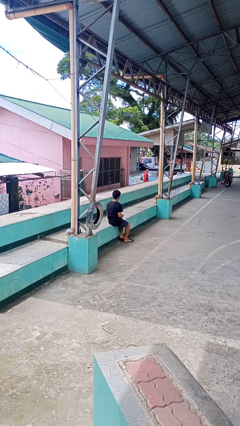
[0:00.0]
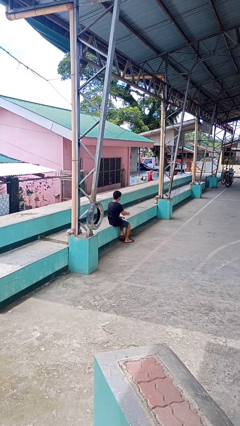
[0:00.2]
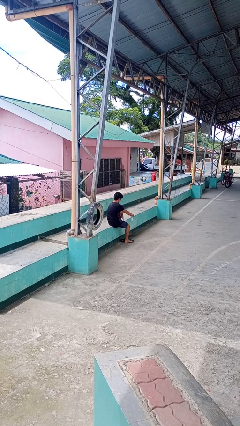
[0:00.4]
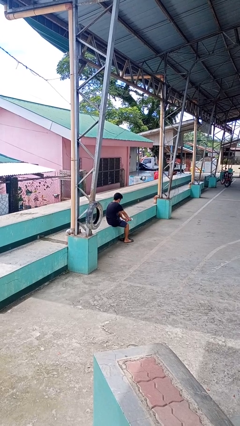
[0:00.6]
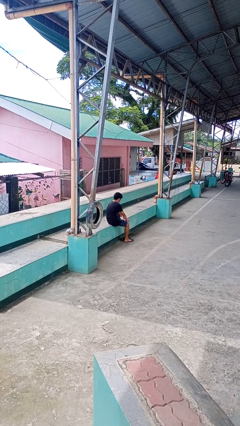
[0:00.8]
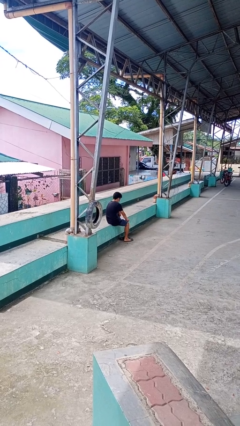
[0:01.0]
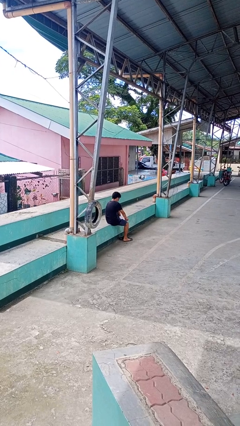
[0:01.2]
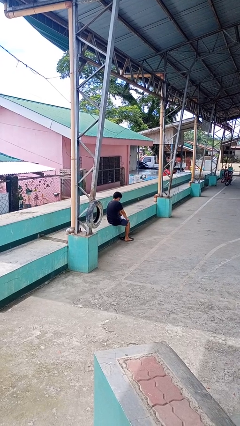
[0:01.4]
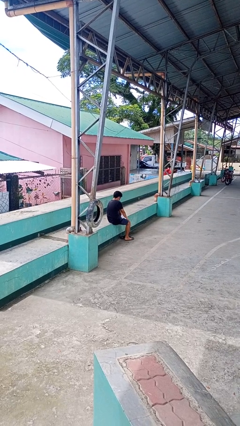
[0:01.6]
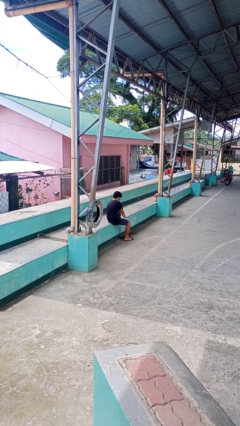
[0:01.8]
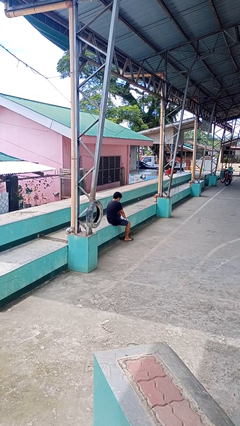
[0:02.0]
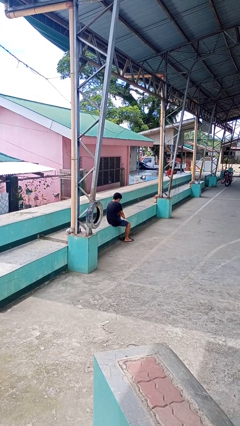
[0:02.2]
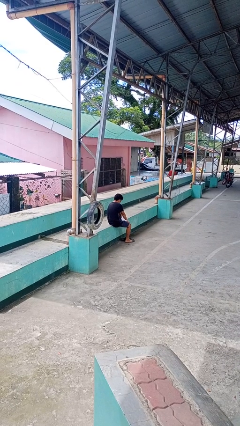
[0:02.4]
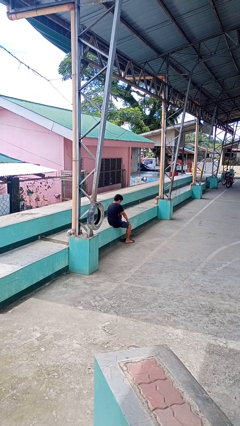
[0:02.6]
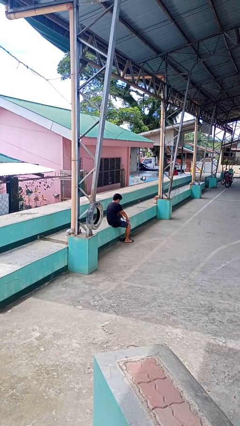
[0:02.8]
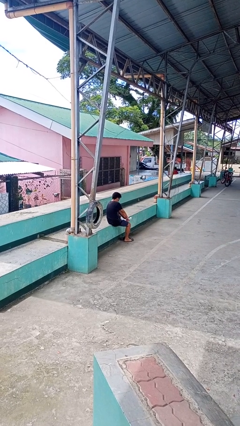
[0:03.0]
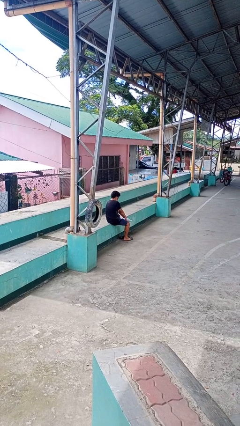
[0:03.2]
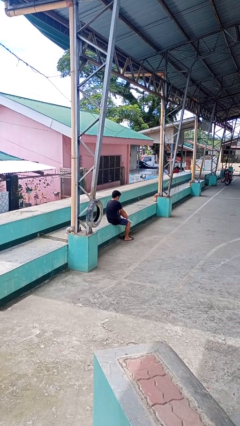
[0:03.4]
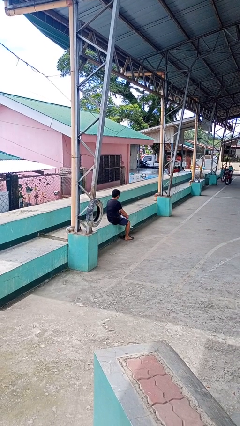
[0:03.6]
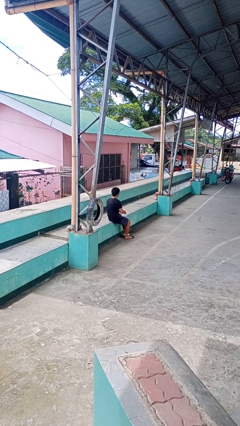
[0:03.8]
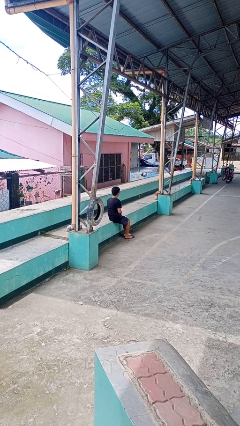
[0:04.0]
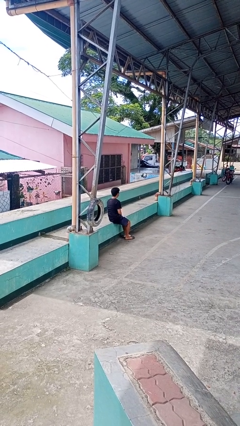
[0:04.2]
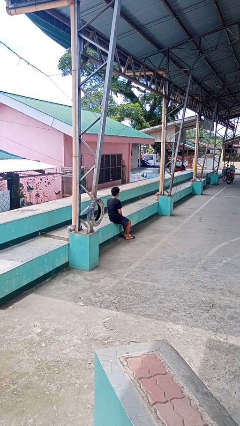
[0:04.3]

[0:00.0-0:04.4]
person puts on socks

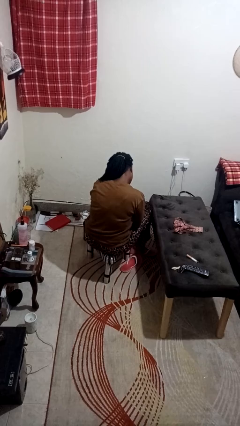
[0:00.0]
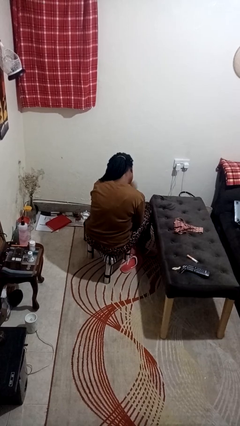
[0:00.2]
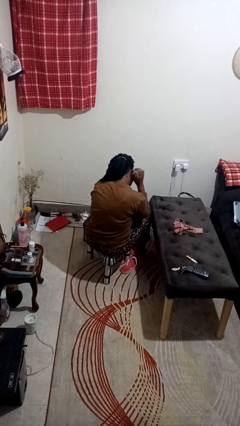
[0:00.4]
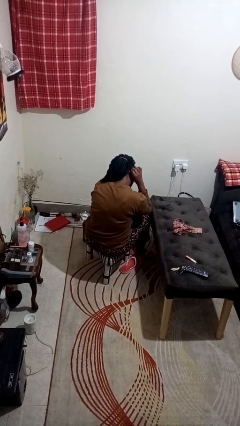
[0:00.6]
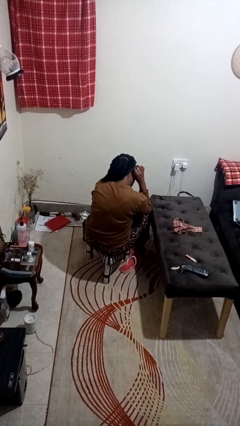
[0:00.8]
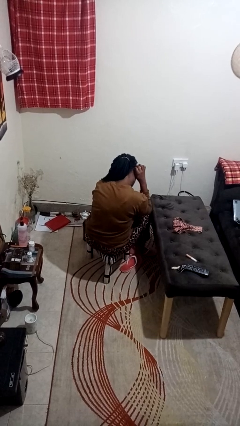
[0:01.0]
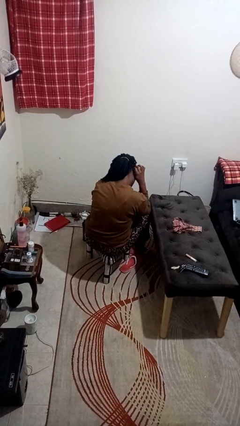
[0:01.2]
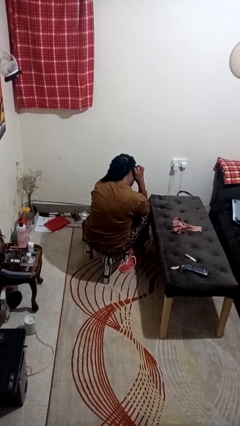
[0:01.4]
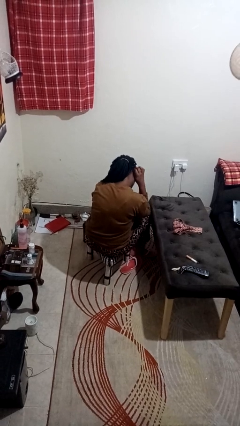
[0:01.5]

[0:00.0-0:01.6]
person gestures listen closely

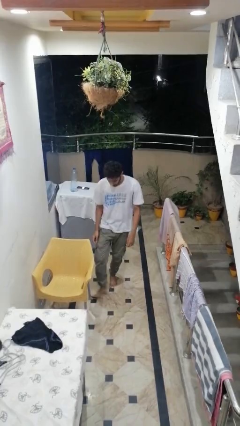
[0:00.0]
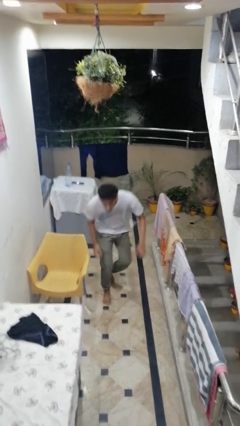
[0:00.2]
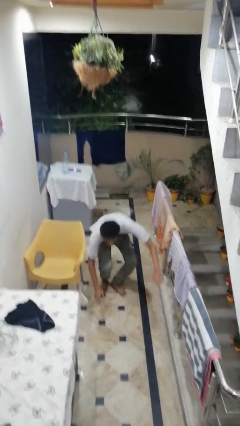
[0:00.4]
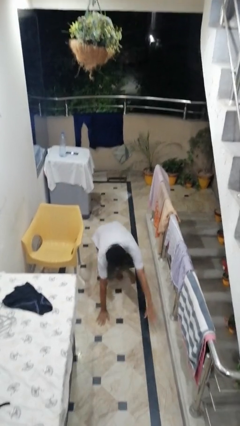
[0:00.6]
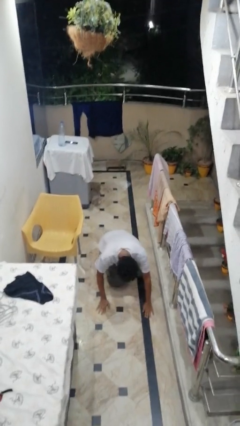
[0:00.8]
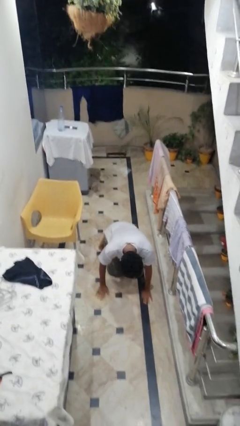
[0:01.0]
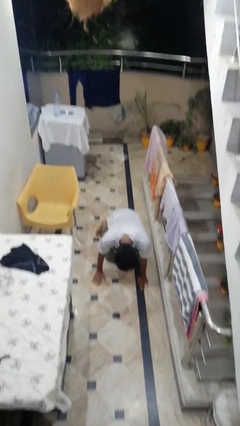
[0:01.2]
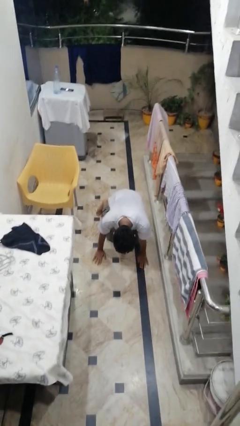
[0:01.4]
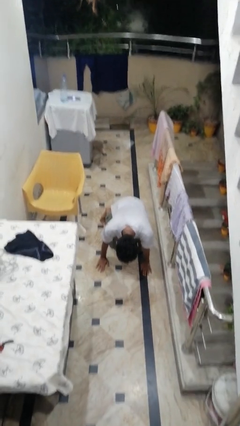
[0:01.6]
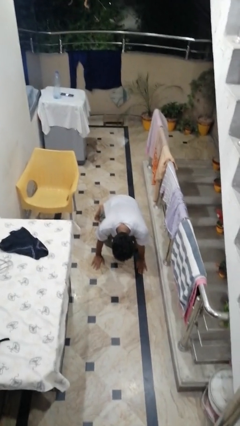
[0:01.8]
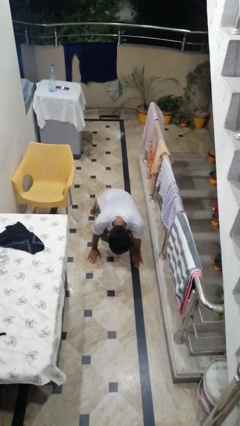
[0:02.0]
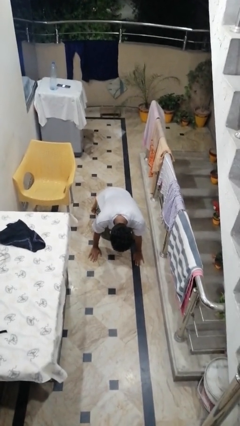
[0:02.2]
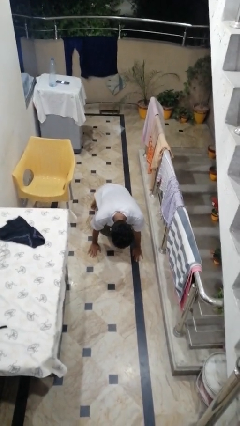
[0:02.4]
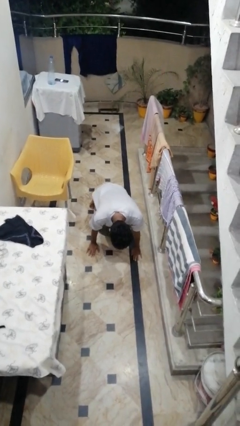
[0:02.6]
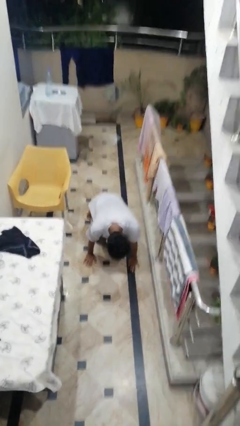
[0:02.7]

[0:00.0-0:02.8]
person trips on object on floor

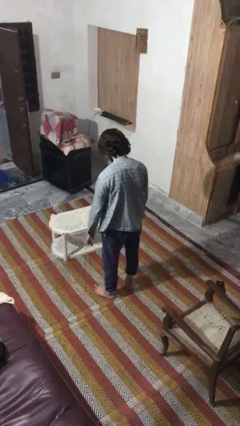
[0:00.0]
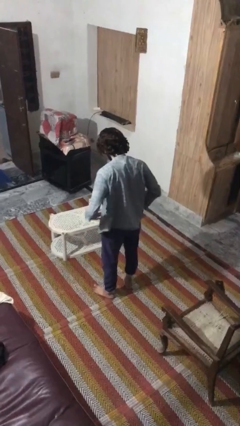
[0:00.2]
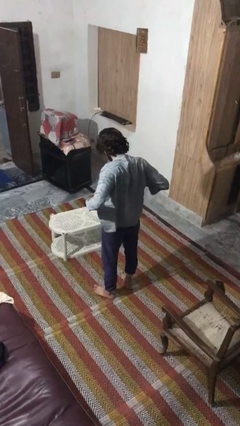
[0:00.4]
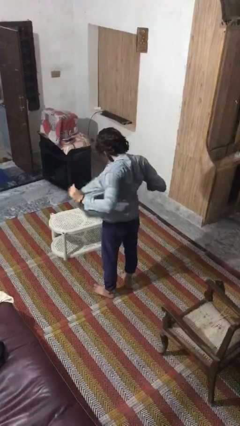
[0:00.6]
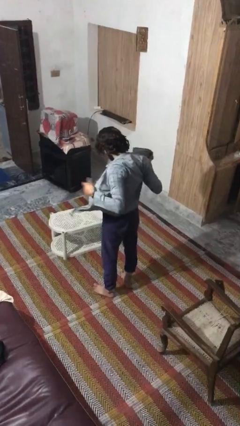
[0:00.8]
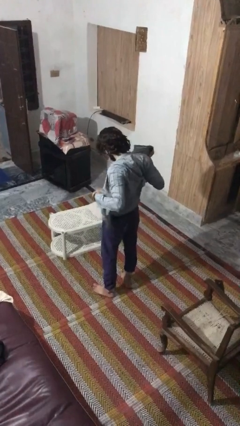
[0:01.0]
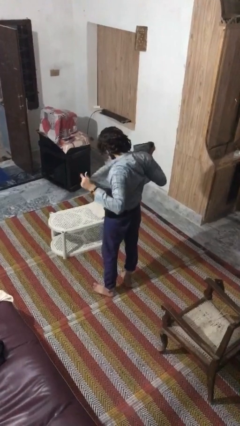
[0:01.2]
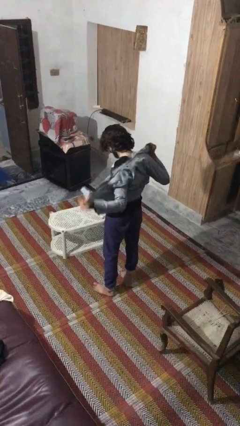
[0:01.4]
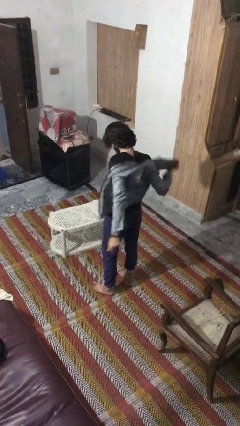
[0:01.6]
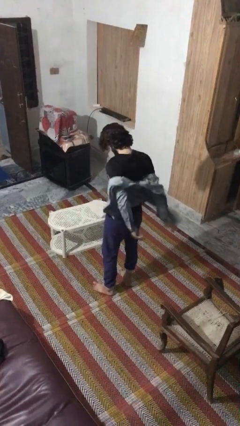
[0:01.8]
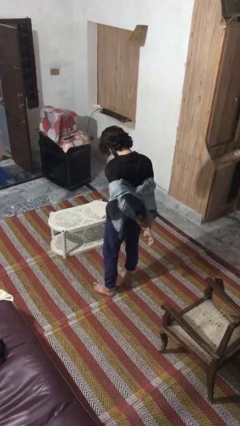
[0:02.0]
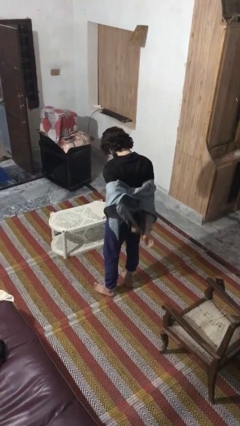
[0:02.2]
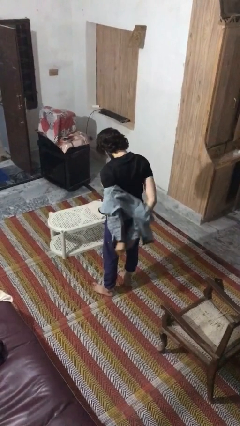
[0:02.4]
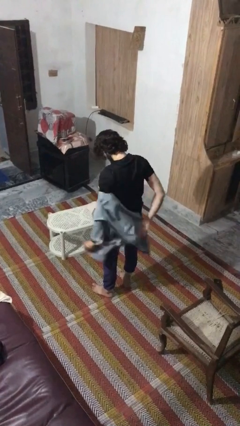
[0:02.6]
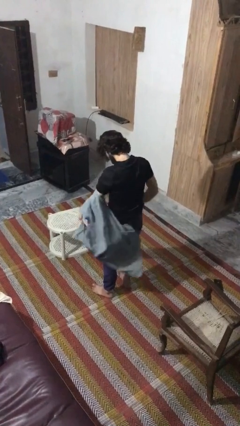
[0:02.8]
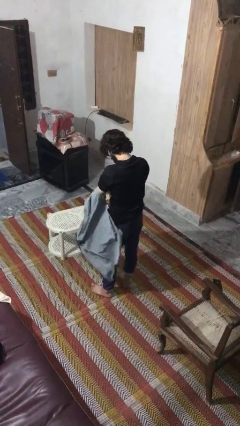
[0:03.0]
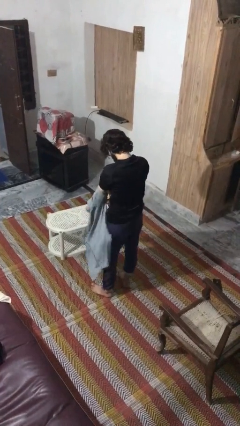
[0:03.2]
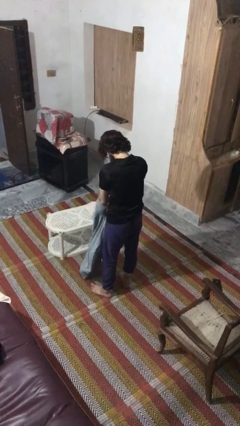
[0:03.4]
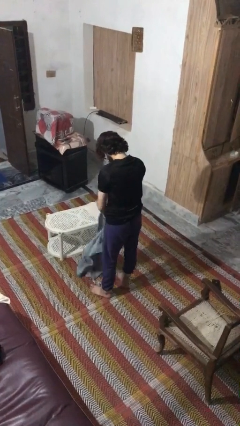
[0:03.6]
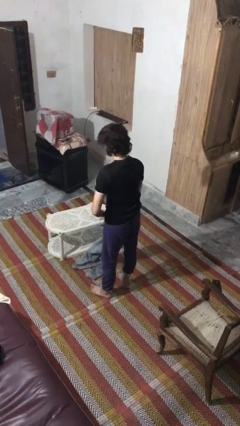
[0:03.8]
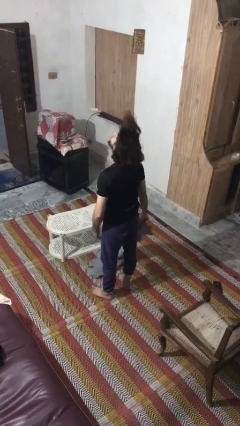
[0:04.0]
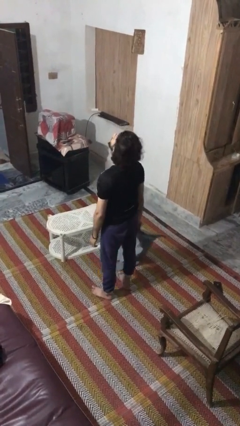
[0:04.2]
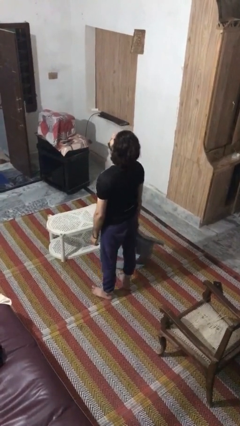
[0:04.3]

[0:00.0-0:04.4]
person takes off shirt

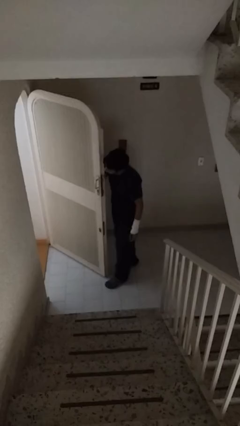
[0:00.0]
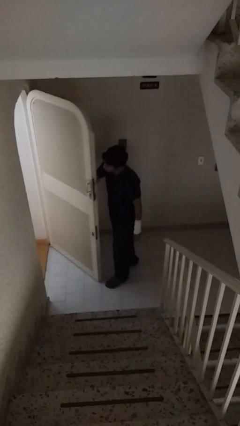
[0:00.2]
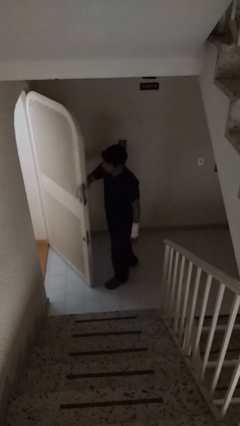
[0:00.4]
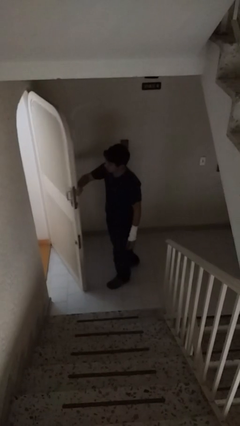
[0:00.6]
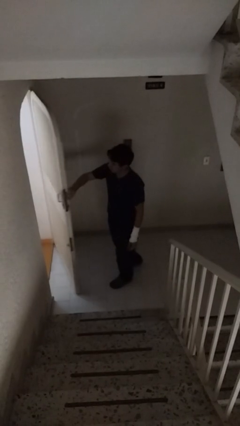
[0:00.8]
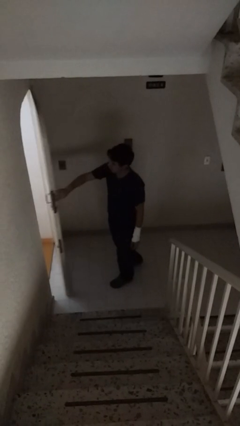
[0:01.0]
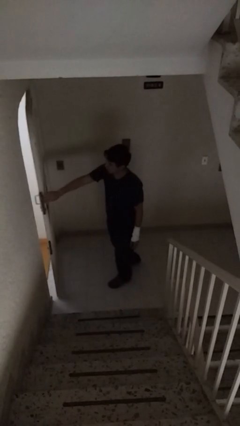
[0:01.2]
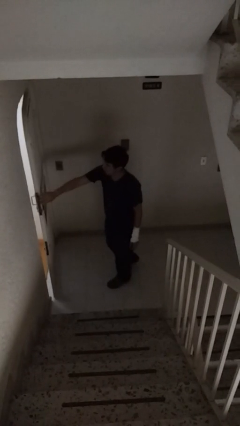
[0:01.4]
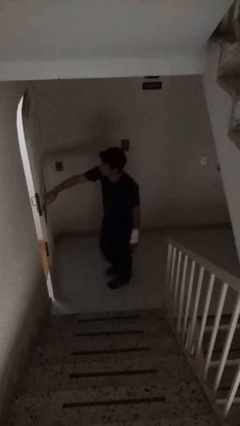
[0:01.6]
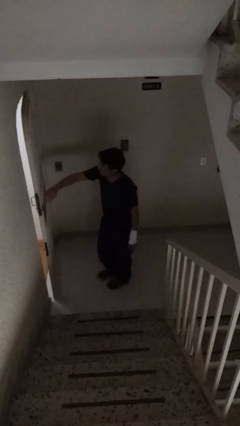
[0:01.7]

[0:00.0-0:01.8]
person closes facility door

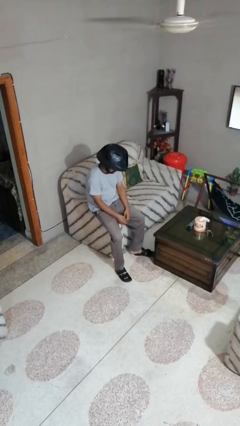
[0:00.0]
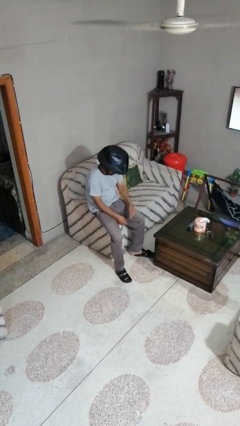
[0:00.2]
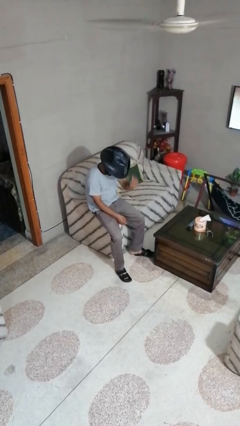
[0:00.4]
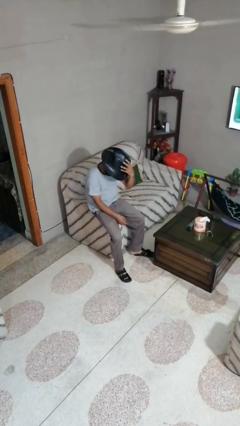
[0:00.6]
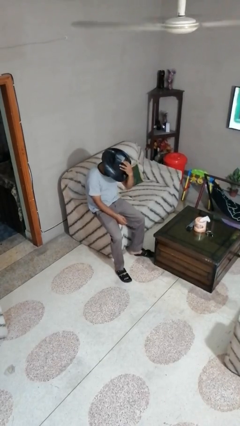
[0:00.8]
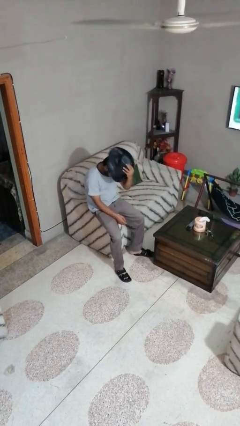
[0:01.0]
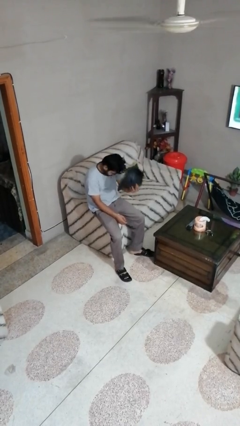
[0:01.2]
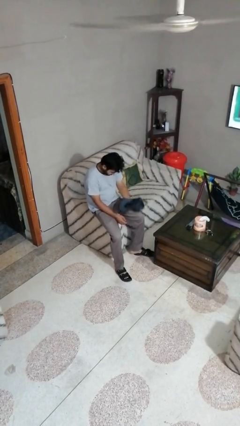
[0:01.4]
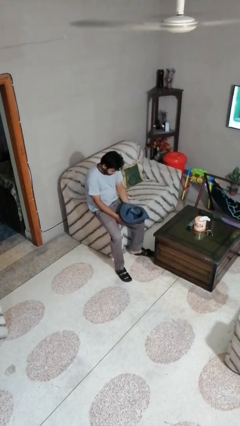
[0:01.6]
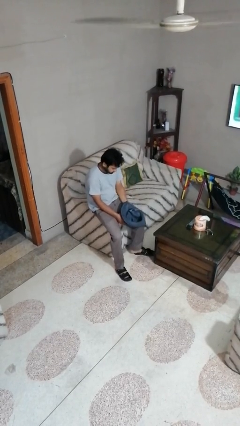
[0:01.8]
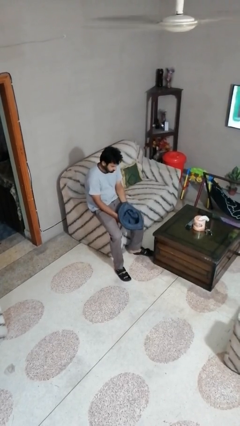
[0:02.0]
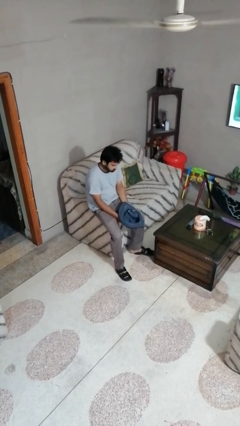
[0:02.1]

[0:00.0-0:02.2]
person takes off hat
